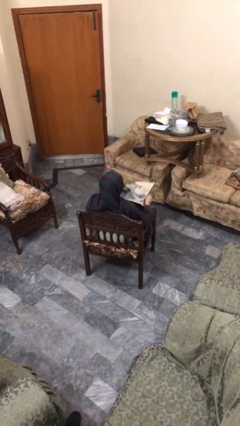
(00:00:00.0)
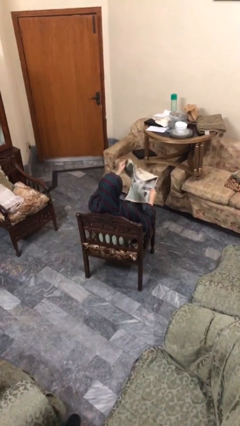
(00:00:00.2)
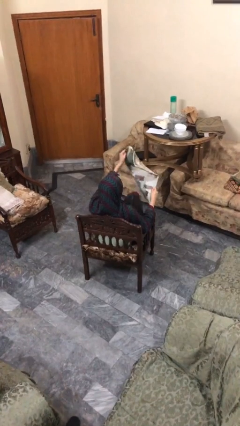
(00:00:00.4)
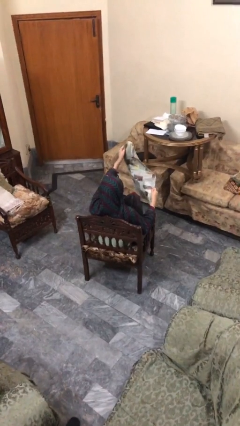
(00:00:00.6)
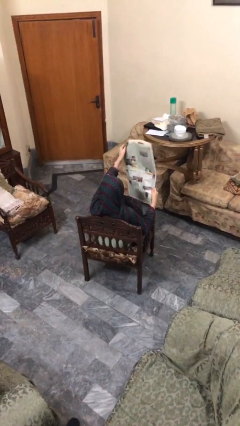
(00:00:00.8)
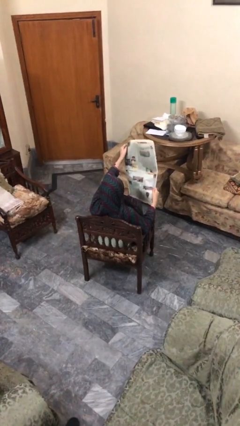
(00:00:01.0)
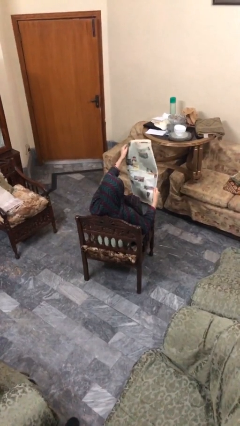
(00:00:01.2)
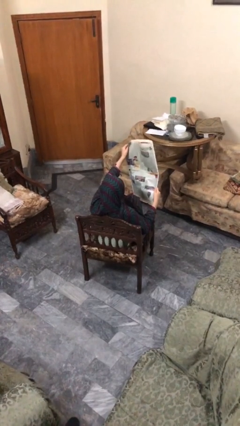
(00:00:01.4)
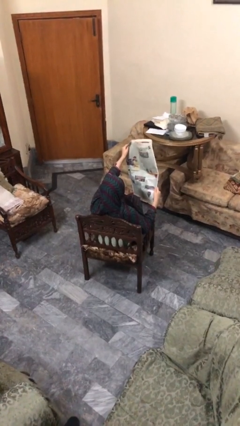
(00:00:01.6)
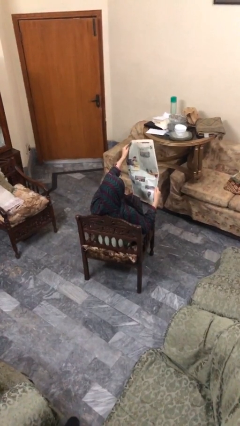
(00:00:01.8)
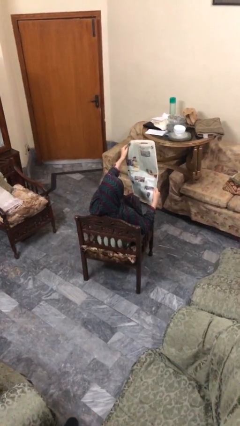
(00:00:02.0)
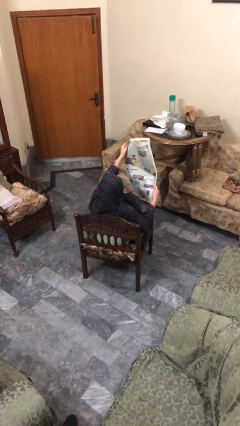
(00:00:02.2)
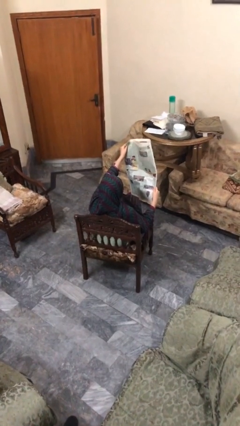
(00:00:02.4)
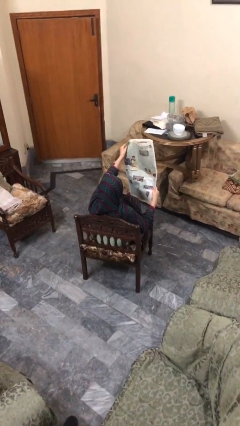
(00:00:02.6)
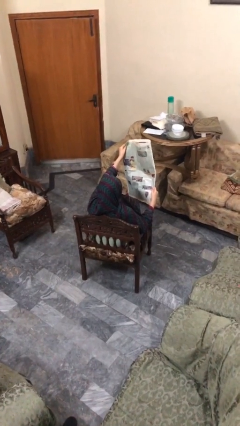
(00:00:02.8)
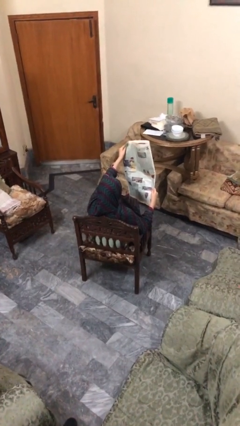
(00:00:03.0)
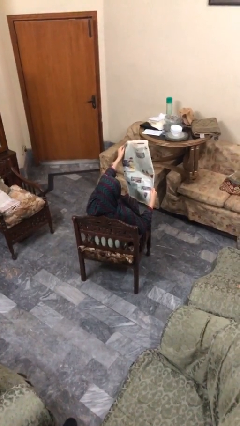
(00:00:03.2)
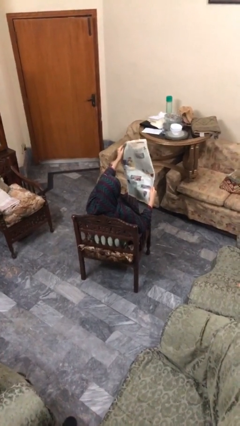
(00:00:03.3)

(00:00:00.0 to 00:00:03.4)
person reads newspaper

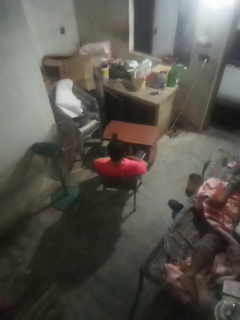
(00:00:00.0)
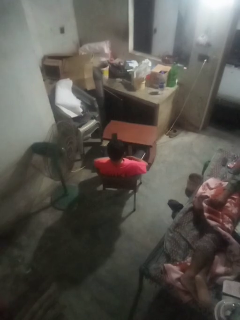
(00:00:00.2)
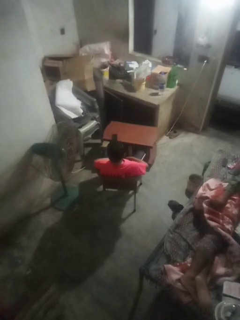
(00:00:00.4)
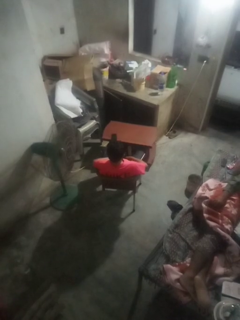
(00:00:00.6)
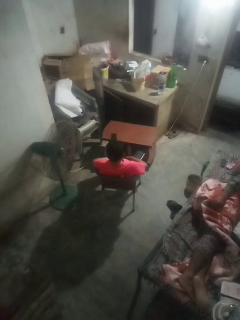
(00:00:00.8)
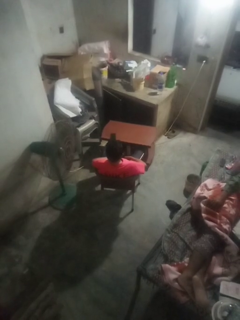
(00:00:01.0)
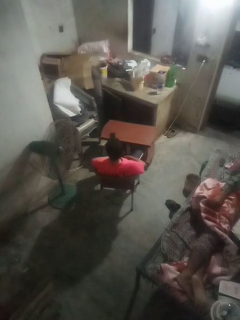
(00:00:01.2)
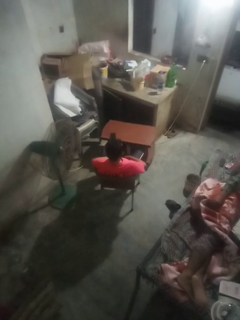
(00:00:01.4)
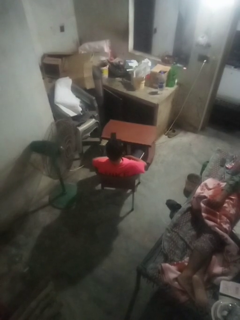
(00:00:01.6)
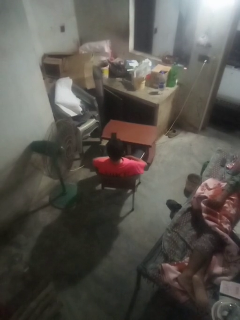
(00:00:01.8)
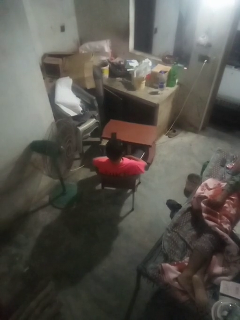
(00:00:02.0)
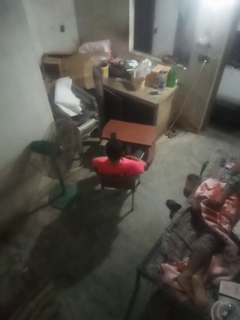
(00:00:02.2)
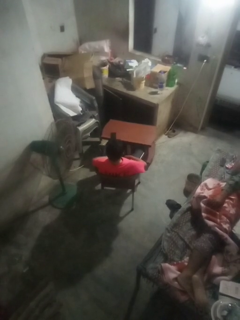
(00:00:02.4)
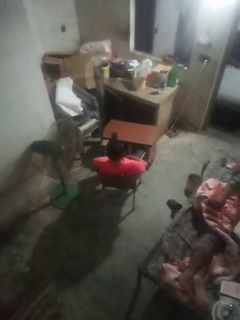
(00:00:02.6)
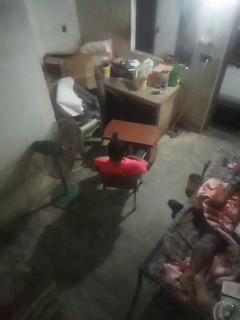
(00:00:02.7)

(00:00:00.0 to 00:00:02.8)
person shakes head

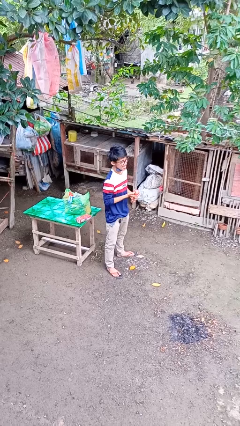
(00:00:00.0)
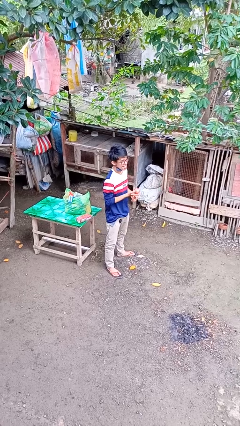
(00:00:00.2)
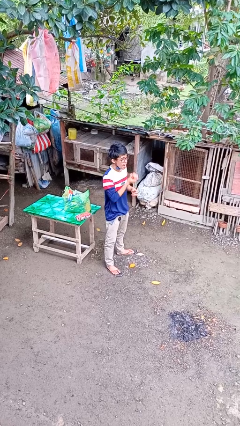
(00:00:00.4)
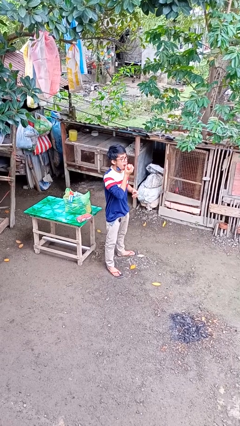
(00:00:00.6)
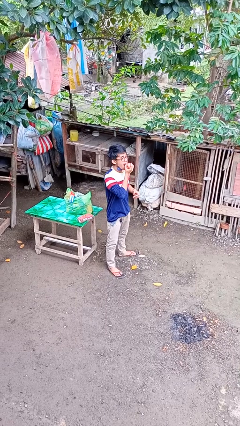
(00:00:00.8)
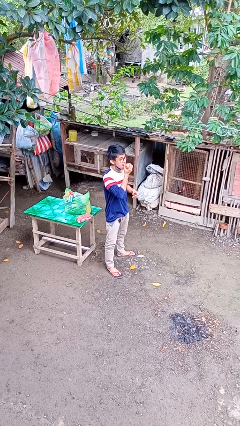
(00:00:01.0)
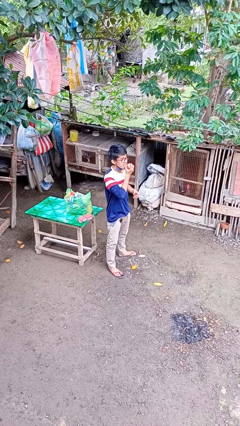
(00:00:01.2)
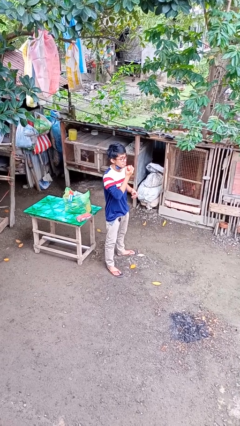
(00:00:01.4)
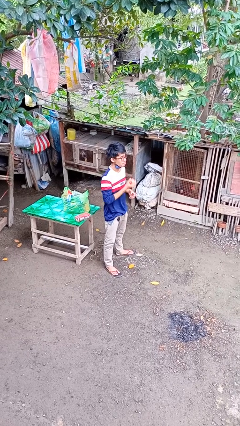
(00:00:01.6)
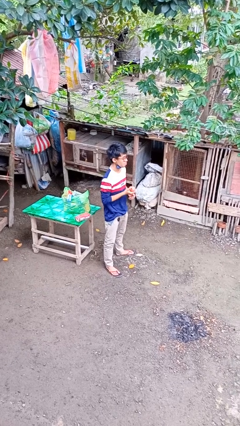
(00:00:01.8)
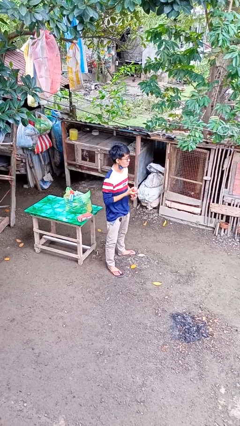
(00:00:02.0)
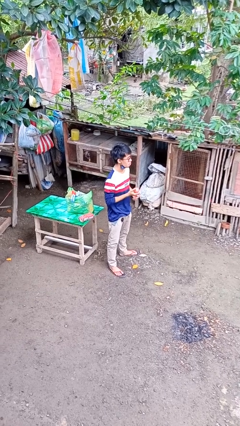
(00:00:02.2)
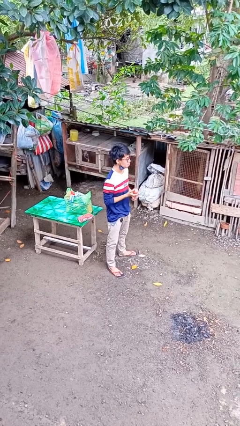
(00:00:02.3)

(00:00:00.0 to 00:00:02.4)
person eats apple

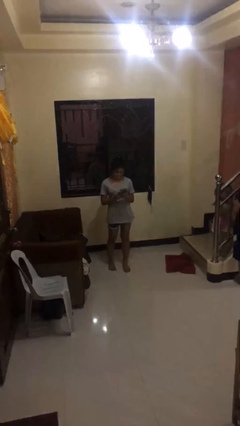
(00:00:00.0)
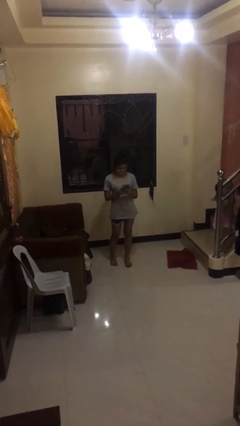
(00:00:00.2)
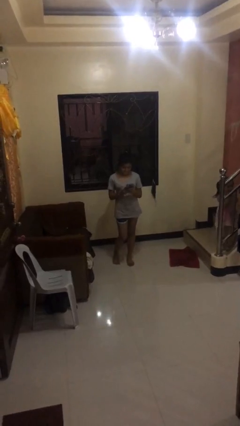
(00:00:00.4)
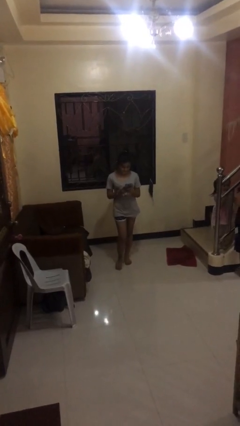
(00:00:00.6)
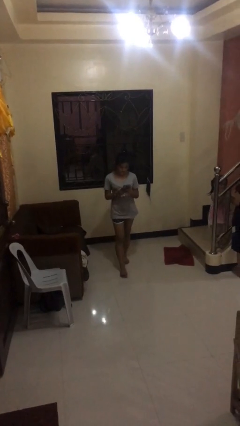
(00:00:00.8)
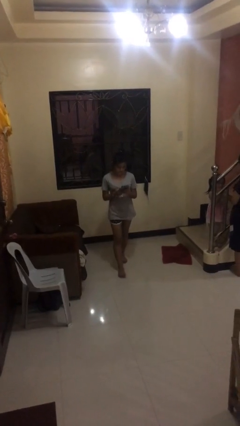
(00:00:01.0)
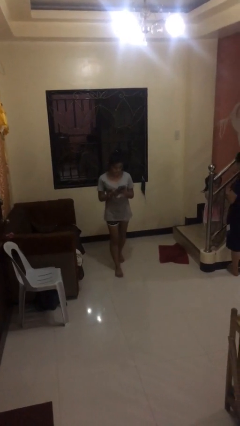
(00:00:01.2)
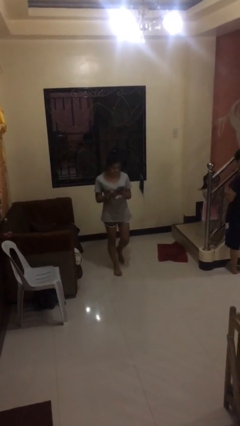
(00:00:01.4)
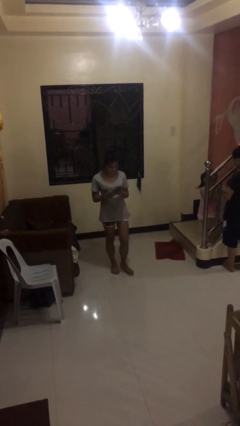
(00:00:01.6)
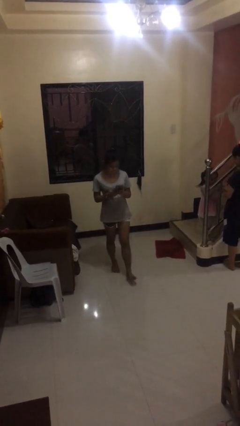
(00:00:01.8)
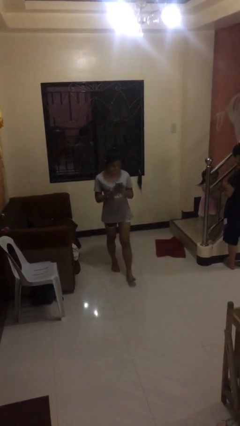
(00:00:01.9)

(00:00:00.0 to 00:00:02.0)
person texts on phone

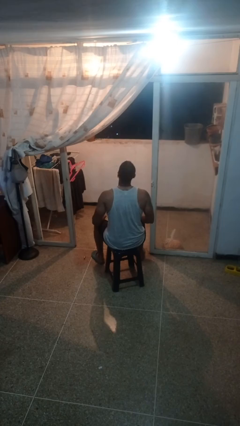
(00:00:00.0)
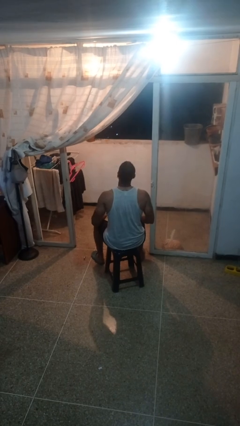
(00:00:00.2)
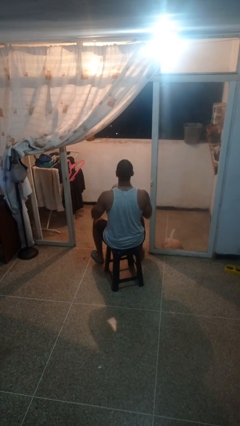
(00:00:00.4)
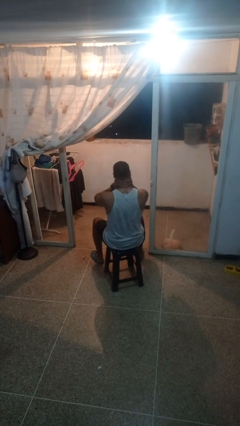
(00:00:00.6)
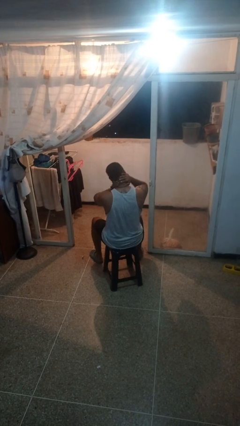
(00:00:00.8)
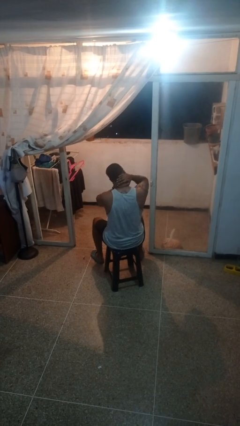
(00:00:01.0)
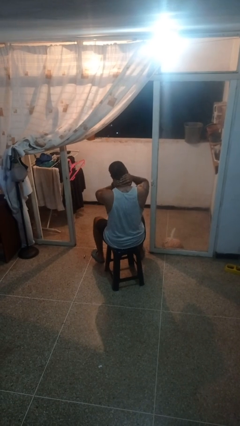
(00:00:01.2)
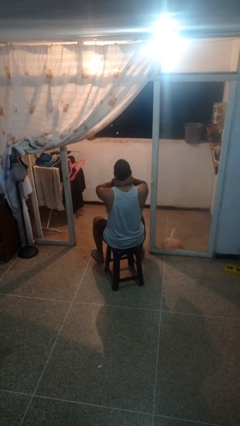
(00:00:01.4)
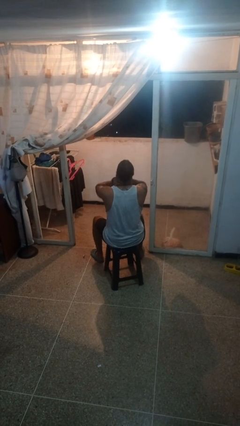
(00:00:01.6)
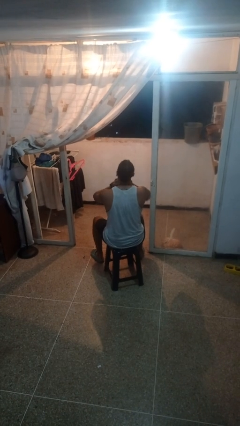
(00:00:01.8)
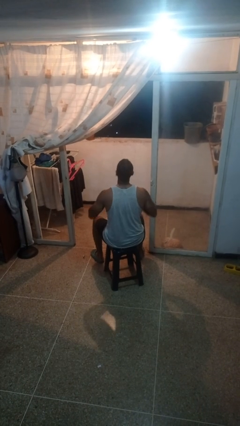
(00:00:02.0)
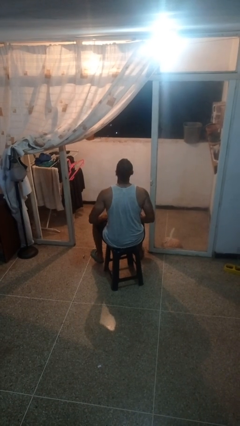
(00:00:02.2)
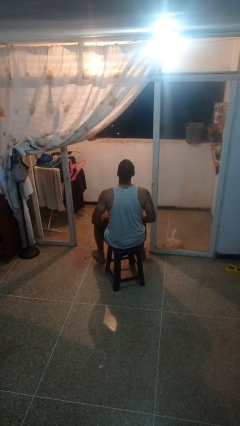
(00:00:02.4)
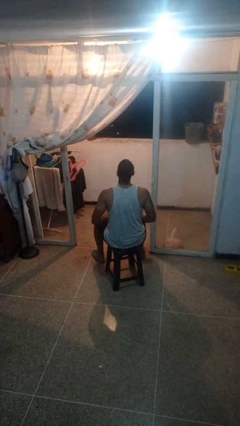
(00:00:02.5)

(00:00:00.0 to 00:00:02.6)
person rubs neck

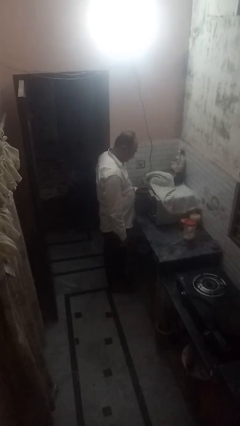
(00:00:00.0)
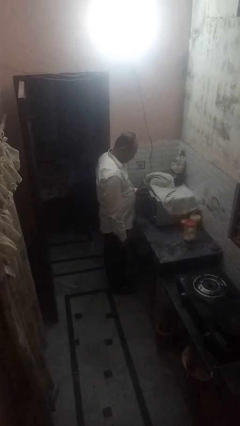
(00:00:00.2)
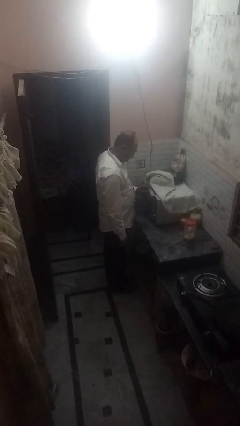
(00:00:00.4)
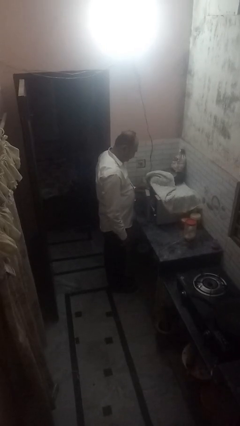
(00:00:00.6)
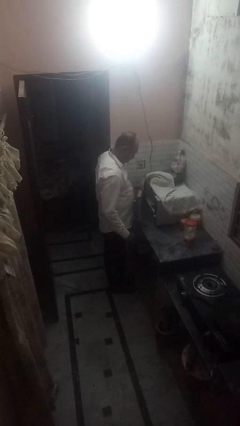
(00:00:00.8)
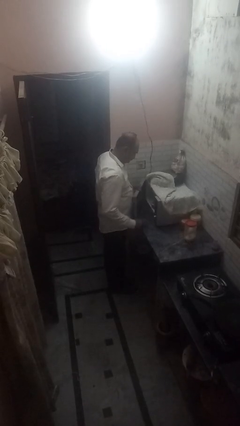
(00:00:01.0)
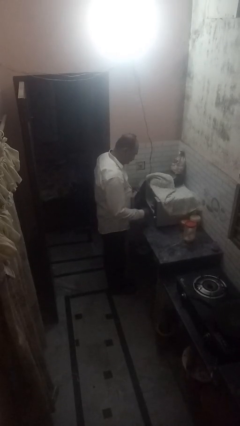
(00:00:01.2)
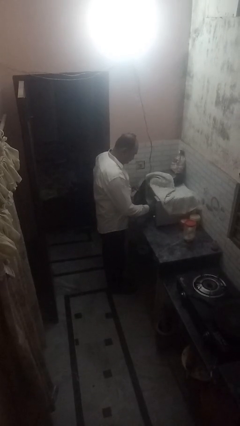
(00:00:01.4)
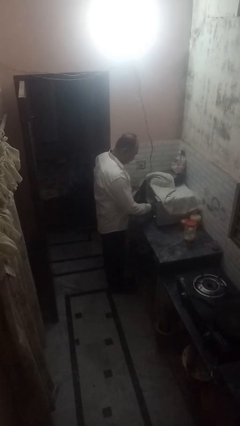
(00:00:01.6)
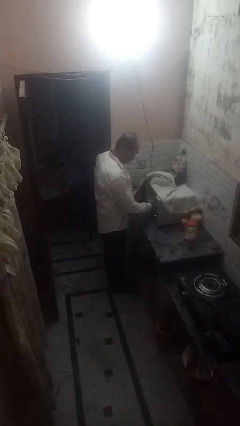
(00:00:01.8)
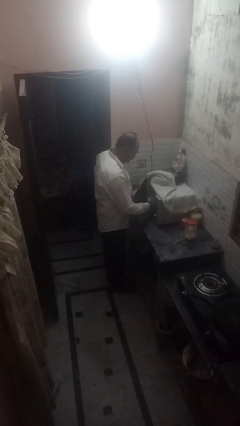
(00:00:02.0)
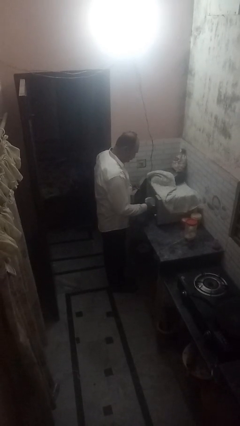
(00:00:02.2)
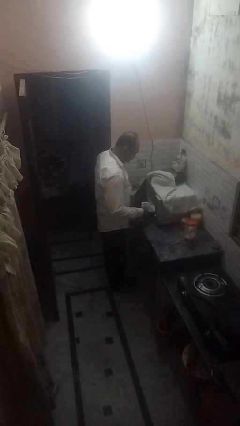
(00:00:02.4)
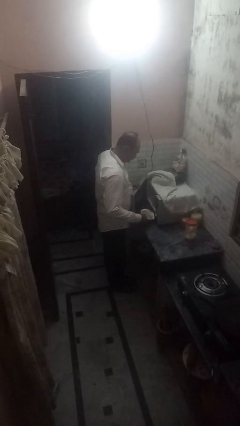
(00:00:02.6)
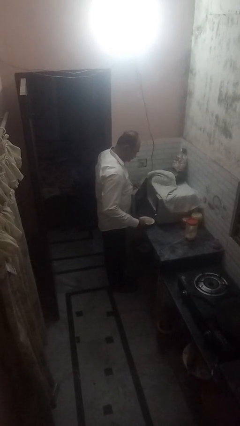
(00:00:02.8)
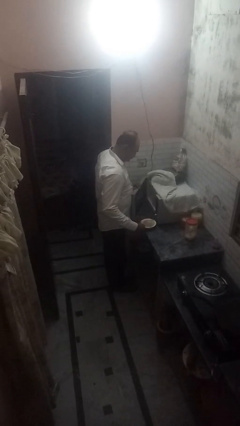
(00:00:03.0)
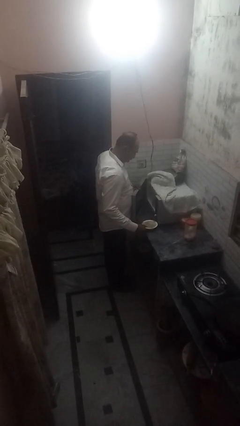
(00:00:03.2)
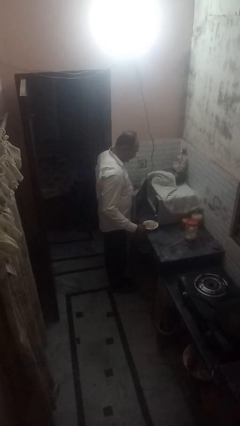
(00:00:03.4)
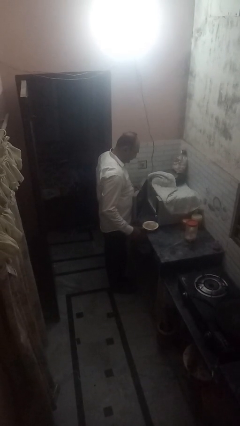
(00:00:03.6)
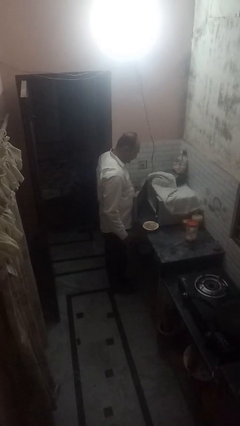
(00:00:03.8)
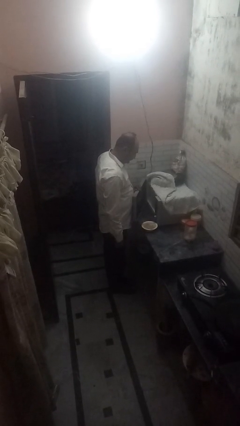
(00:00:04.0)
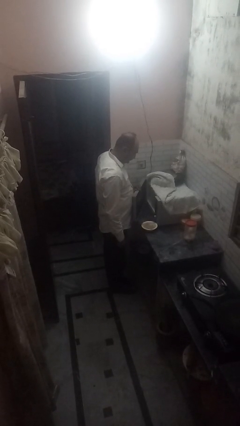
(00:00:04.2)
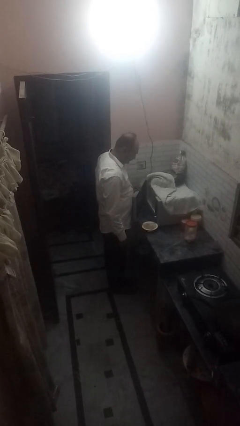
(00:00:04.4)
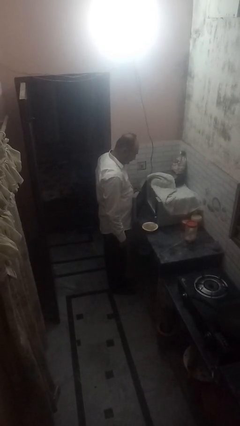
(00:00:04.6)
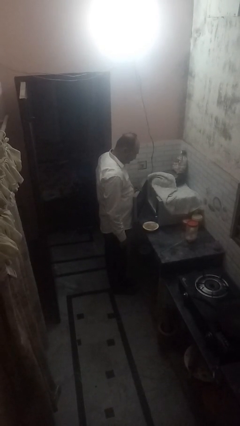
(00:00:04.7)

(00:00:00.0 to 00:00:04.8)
person takes object from microwave

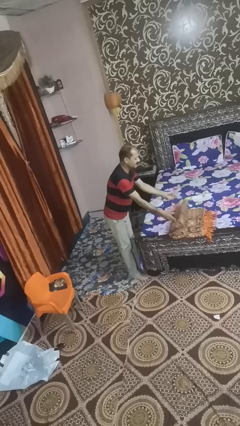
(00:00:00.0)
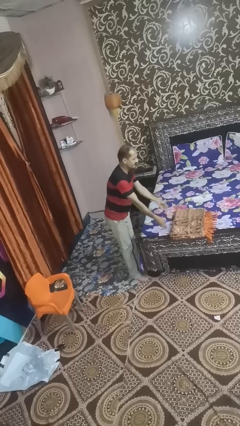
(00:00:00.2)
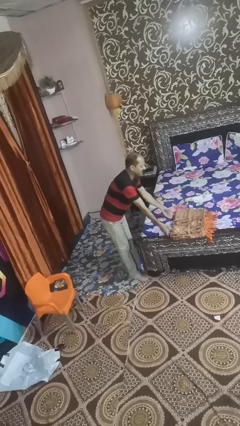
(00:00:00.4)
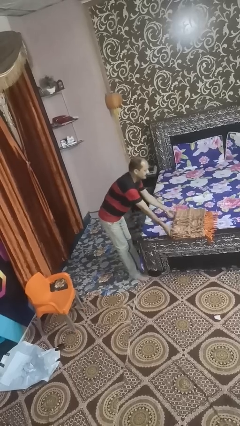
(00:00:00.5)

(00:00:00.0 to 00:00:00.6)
person unfolds blanket
